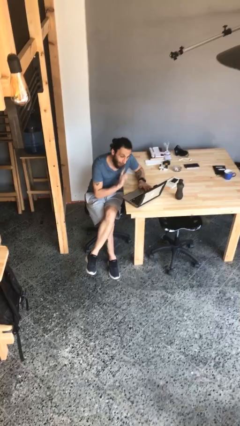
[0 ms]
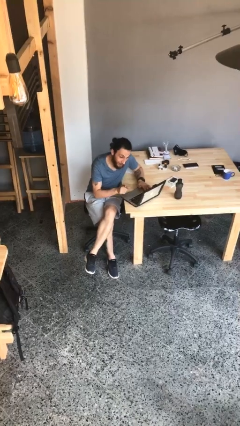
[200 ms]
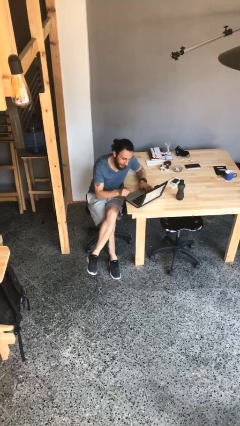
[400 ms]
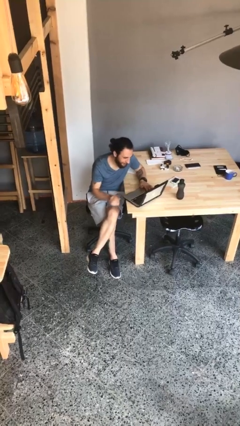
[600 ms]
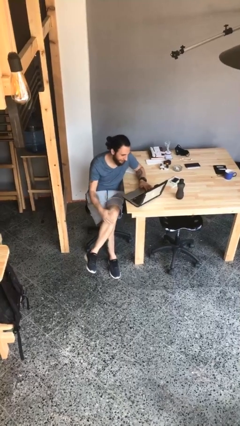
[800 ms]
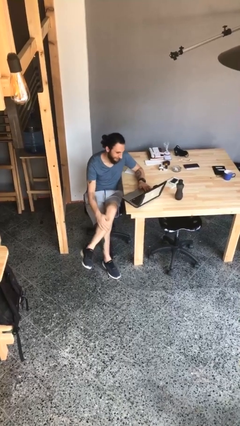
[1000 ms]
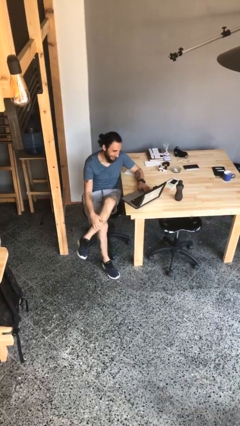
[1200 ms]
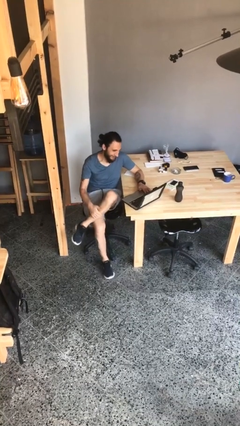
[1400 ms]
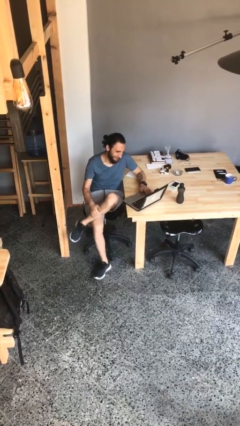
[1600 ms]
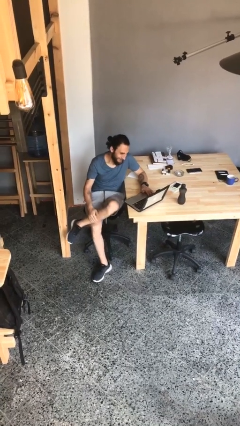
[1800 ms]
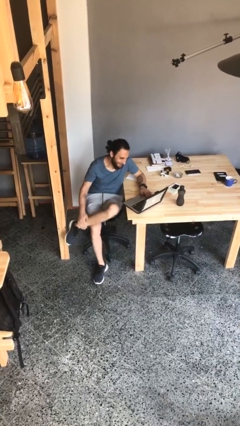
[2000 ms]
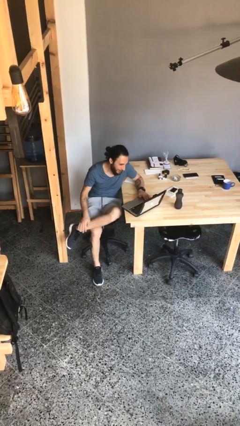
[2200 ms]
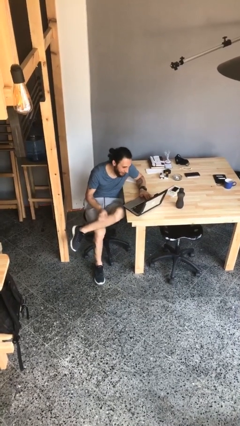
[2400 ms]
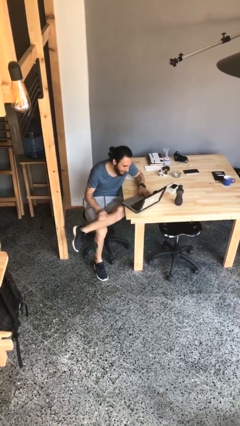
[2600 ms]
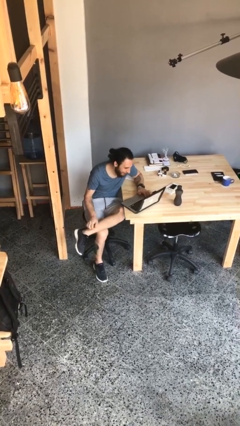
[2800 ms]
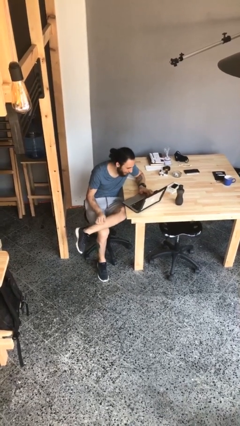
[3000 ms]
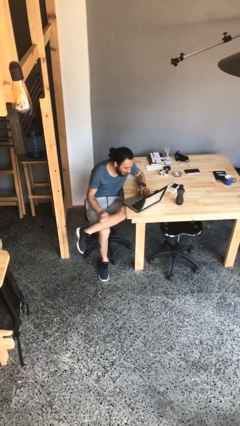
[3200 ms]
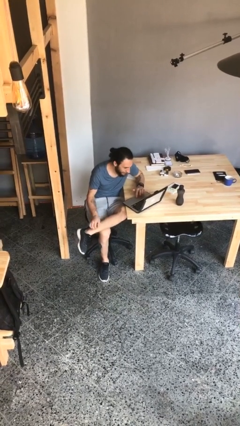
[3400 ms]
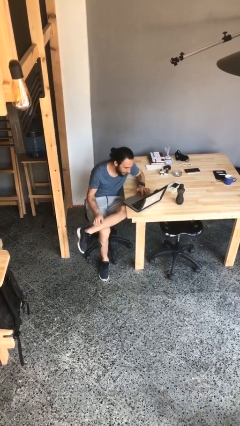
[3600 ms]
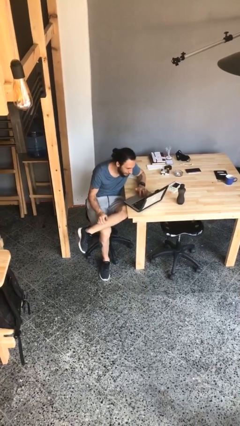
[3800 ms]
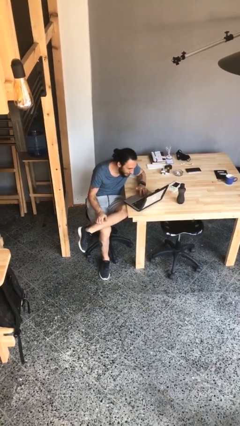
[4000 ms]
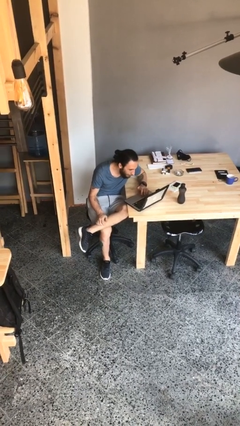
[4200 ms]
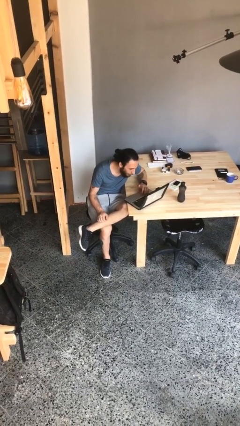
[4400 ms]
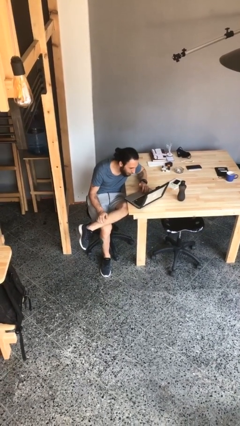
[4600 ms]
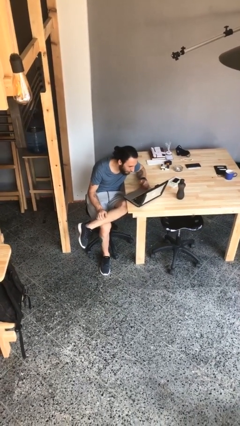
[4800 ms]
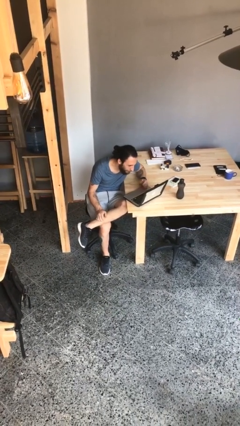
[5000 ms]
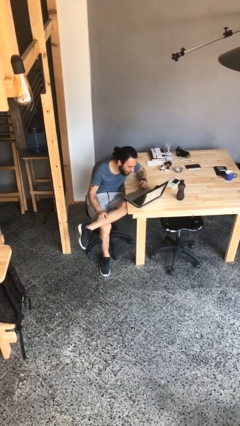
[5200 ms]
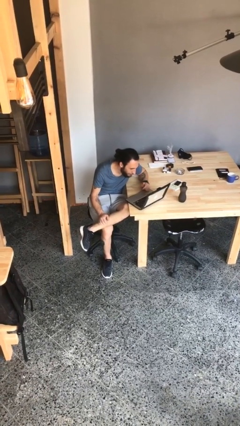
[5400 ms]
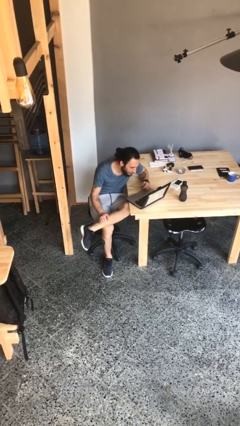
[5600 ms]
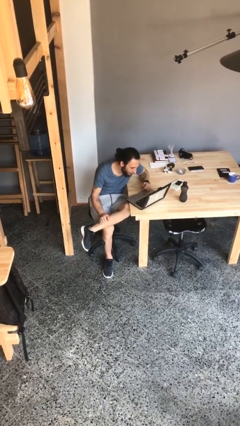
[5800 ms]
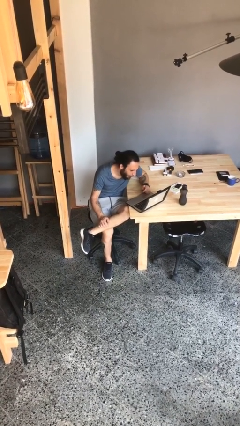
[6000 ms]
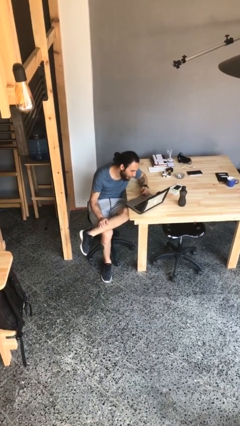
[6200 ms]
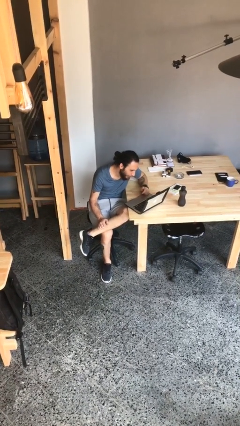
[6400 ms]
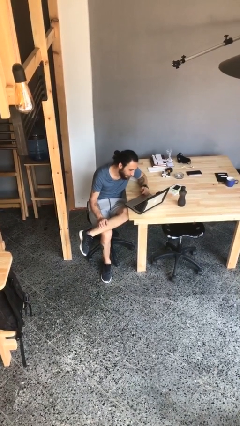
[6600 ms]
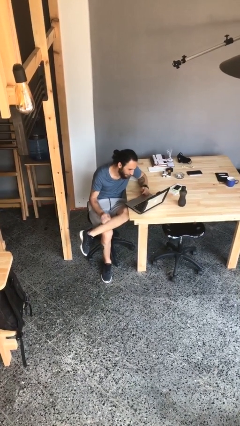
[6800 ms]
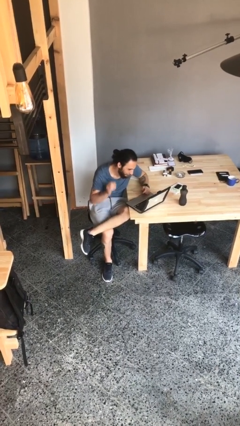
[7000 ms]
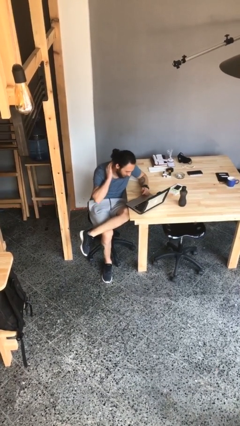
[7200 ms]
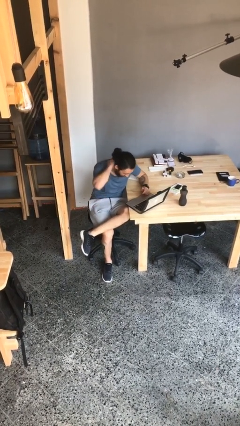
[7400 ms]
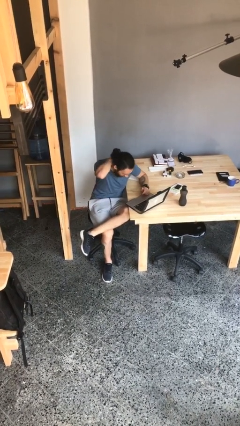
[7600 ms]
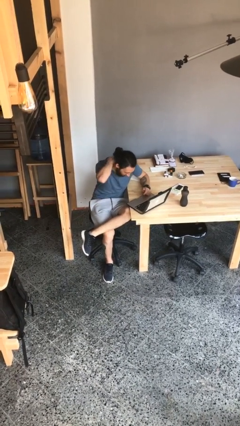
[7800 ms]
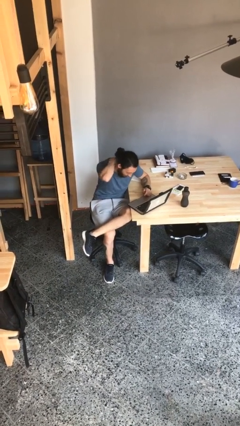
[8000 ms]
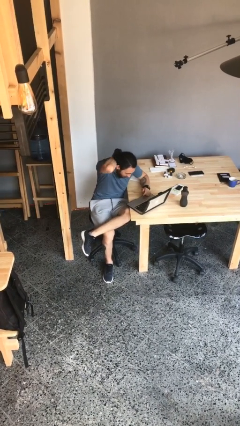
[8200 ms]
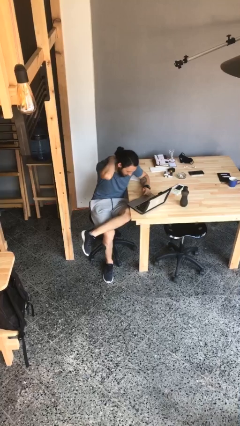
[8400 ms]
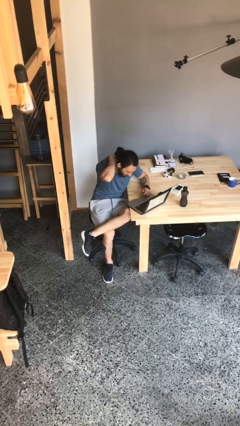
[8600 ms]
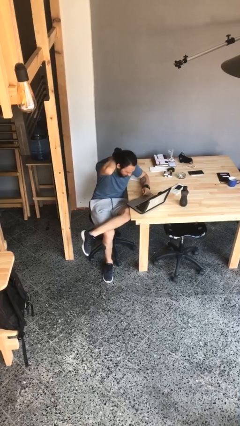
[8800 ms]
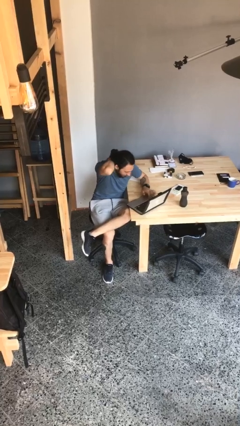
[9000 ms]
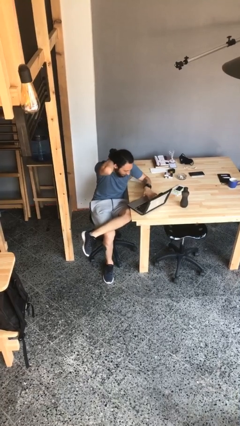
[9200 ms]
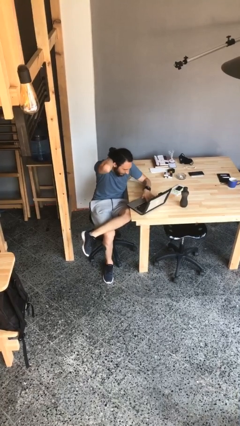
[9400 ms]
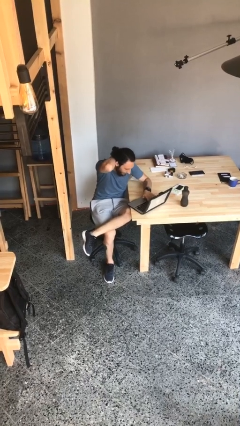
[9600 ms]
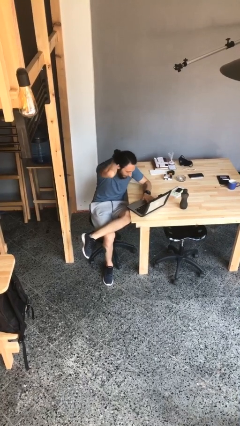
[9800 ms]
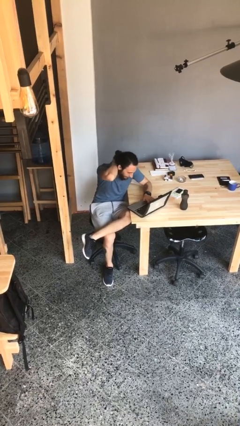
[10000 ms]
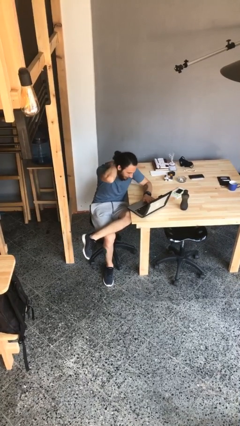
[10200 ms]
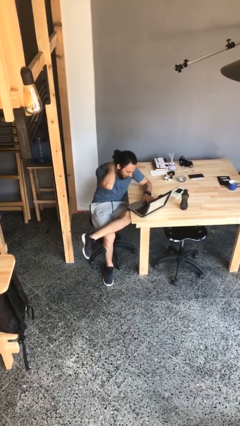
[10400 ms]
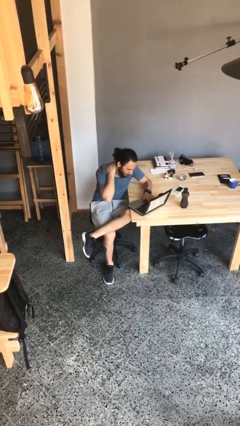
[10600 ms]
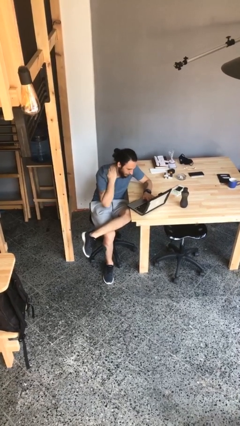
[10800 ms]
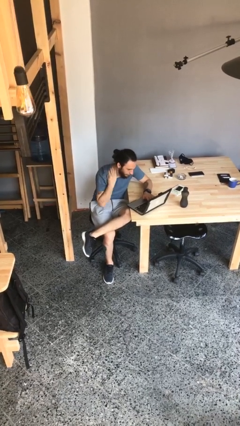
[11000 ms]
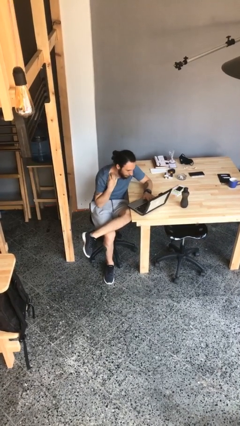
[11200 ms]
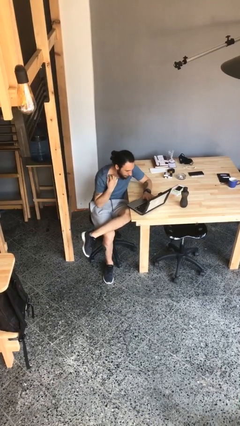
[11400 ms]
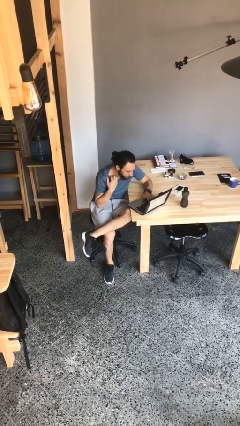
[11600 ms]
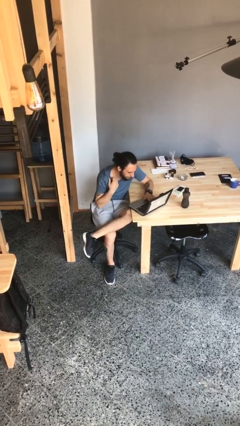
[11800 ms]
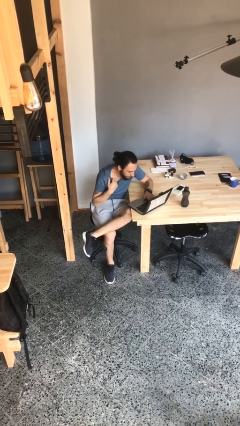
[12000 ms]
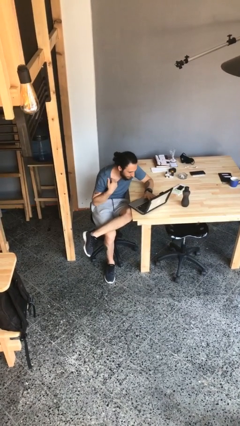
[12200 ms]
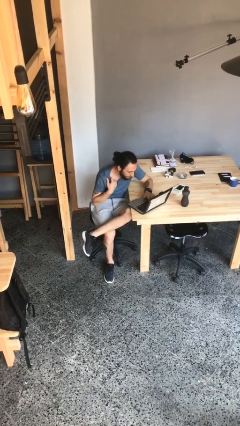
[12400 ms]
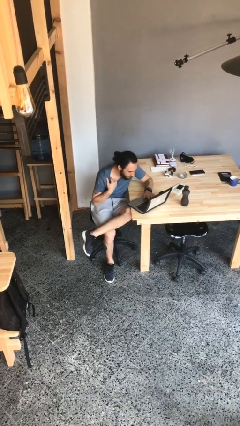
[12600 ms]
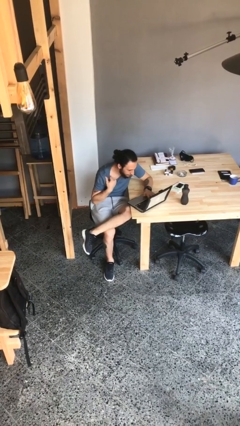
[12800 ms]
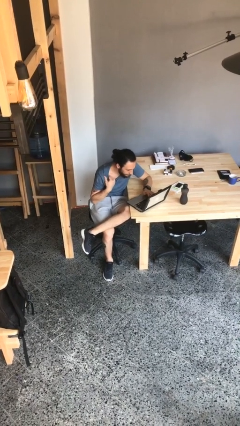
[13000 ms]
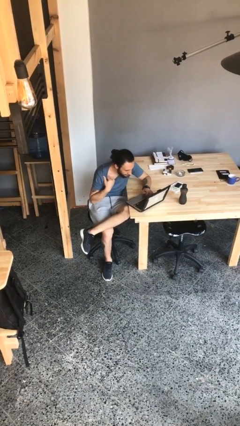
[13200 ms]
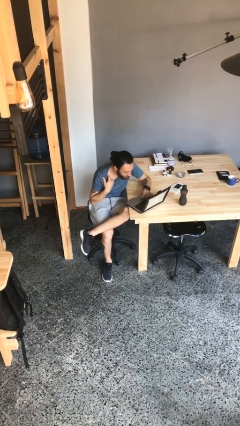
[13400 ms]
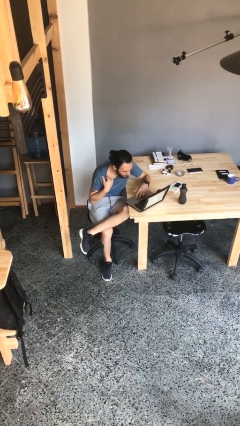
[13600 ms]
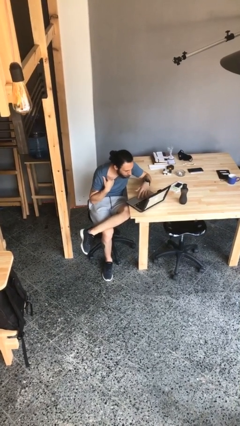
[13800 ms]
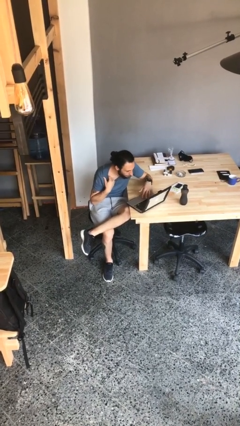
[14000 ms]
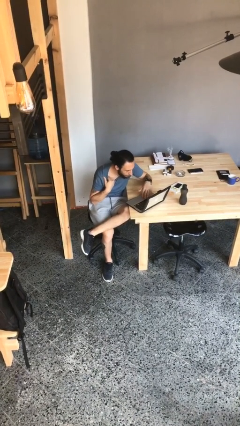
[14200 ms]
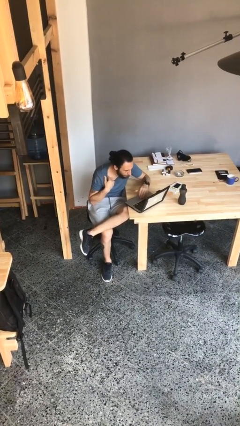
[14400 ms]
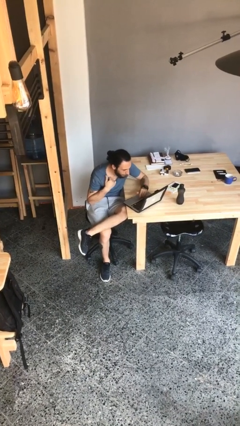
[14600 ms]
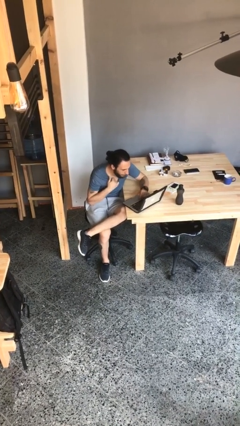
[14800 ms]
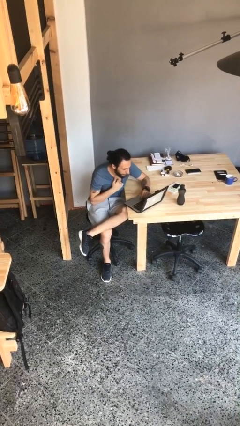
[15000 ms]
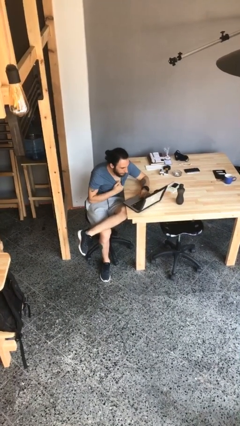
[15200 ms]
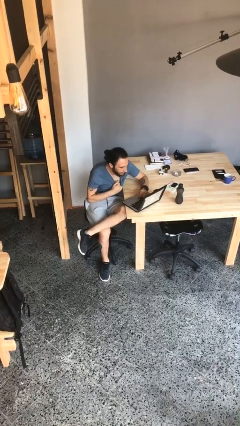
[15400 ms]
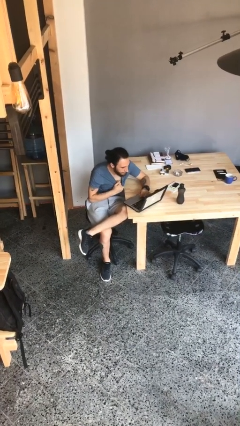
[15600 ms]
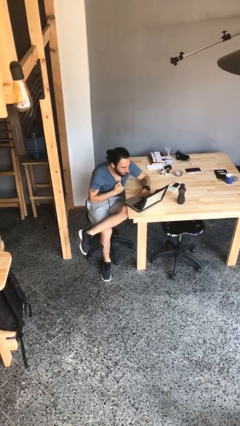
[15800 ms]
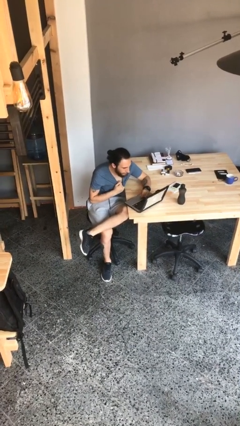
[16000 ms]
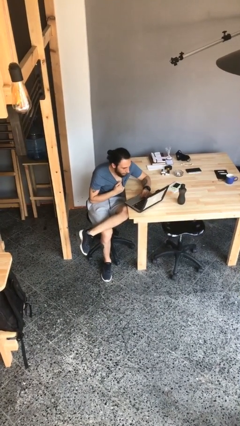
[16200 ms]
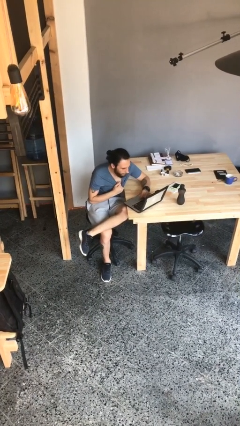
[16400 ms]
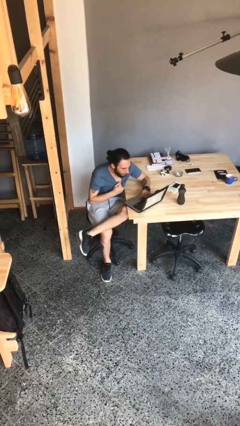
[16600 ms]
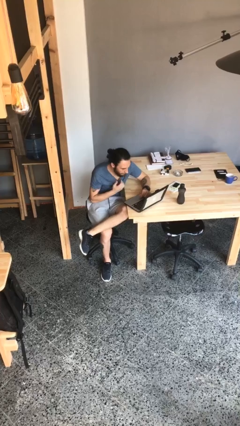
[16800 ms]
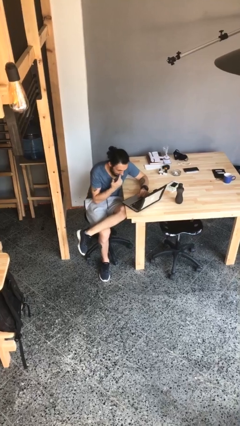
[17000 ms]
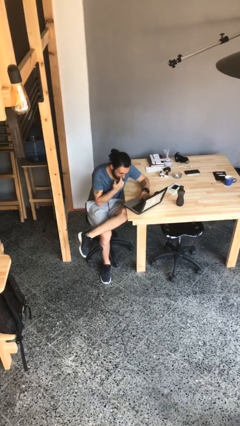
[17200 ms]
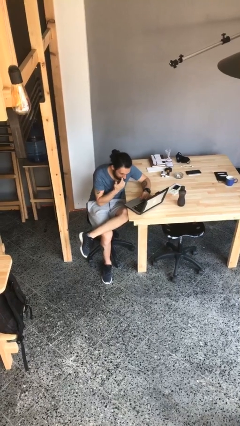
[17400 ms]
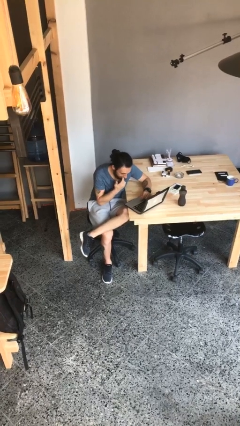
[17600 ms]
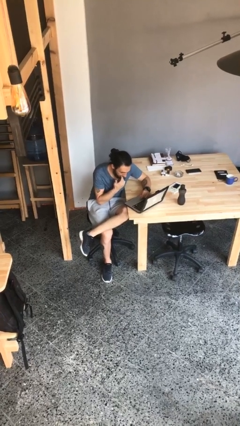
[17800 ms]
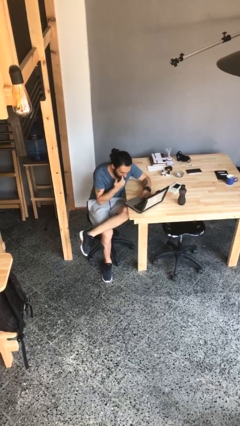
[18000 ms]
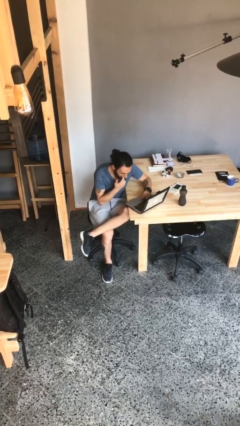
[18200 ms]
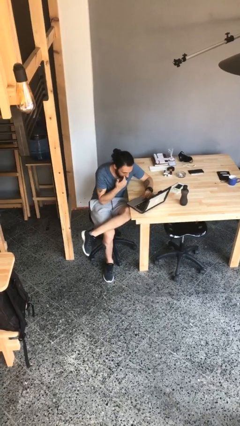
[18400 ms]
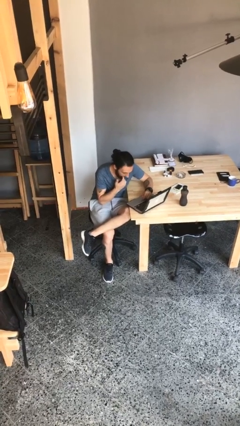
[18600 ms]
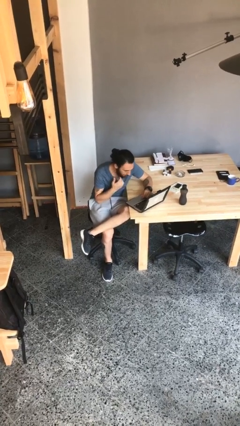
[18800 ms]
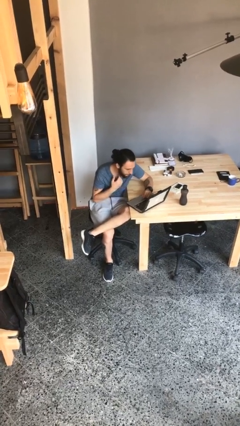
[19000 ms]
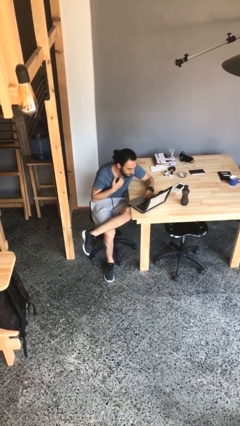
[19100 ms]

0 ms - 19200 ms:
person interacts with laptop
